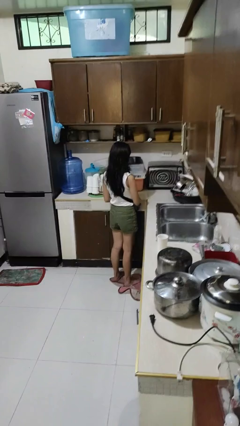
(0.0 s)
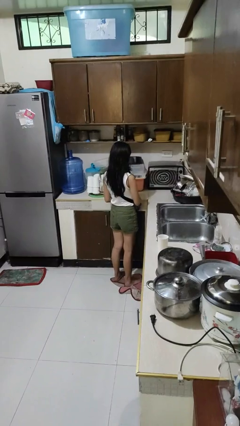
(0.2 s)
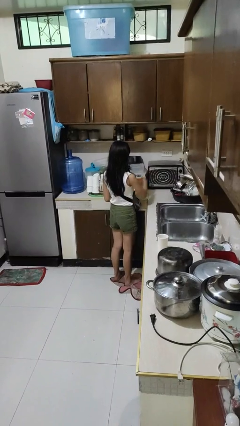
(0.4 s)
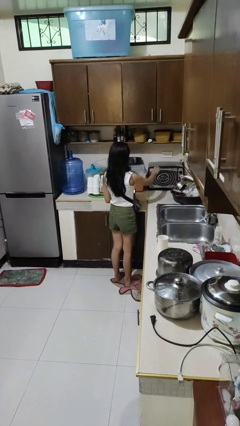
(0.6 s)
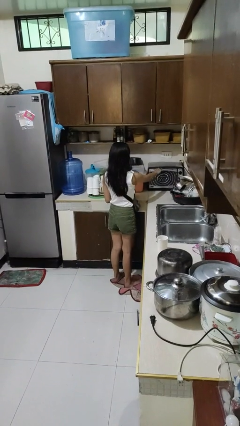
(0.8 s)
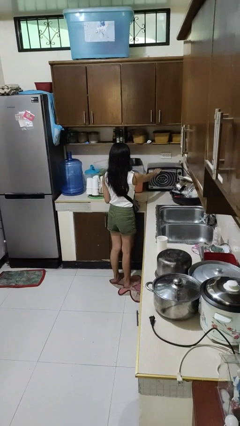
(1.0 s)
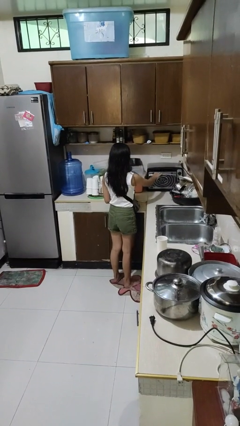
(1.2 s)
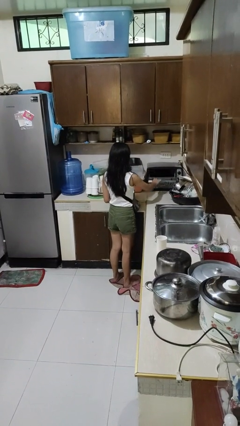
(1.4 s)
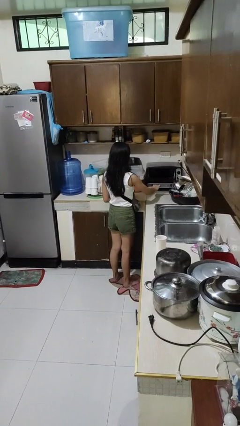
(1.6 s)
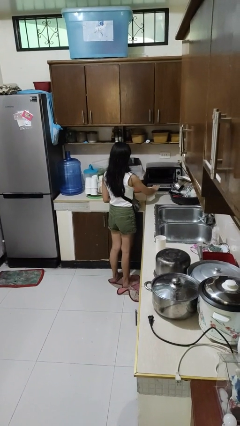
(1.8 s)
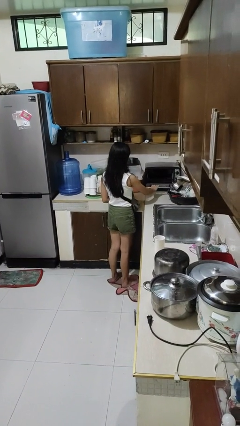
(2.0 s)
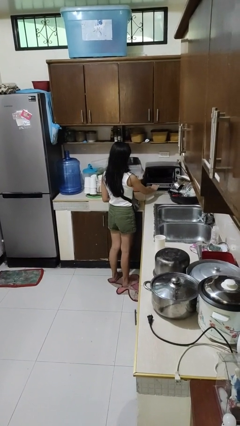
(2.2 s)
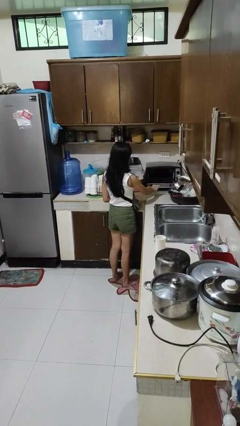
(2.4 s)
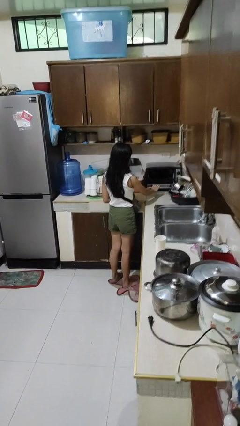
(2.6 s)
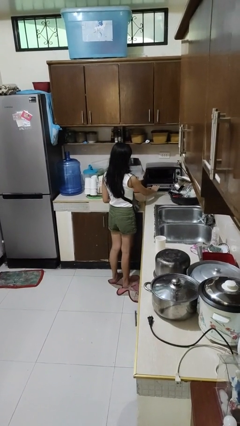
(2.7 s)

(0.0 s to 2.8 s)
person opens microwave

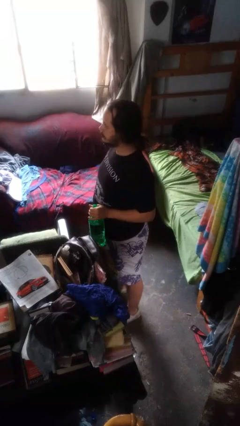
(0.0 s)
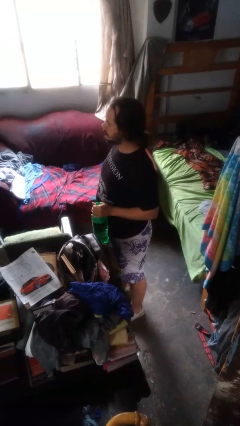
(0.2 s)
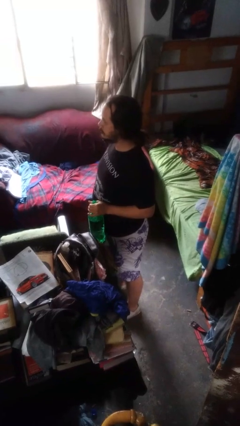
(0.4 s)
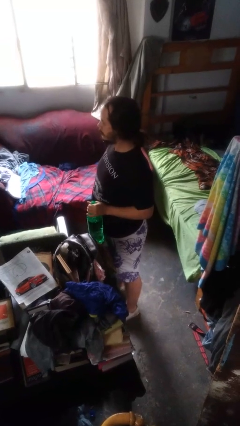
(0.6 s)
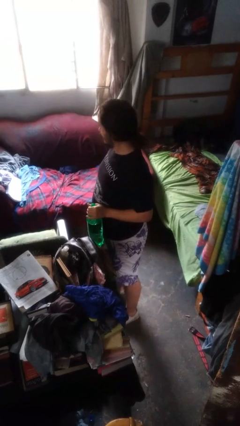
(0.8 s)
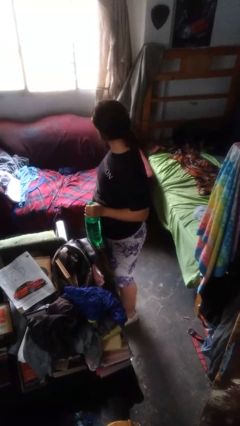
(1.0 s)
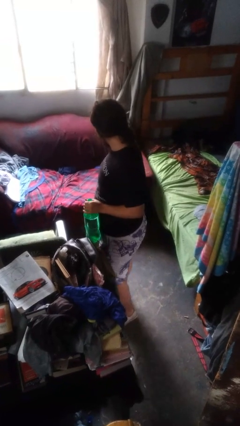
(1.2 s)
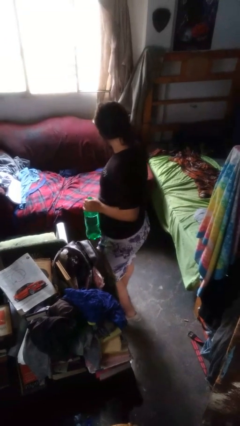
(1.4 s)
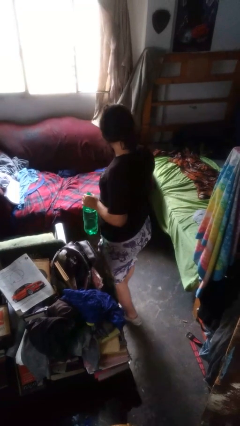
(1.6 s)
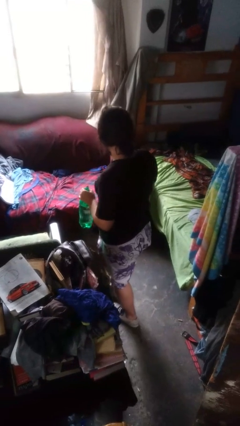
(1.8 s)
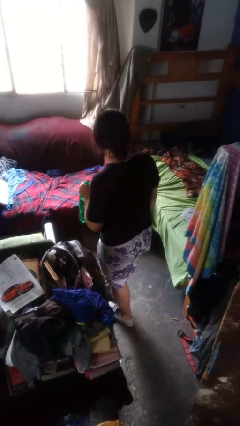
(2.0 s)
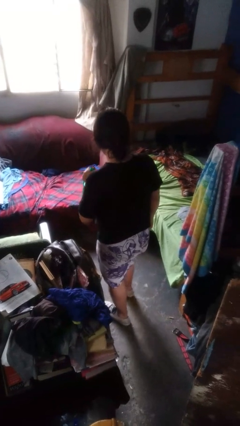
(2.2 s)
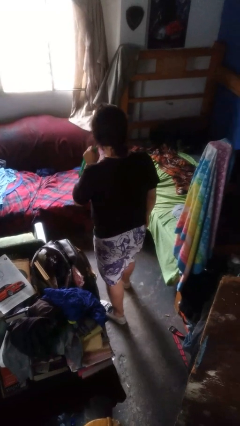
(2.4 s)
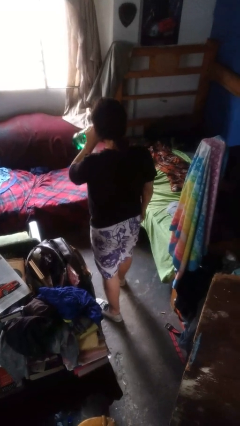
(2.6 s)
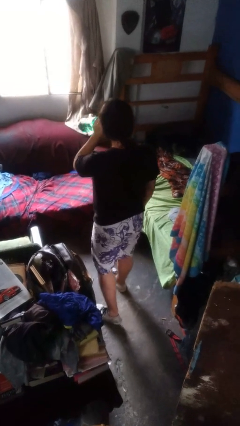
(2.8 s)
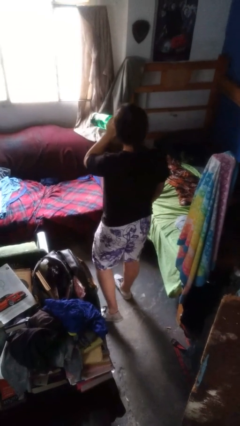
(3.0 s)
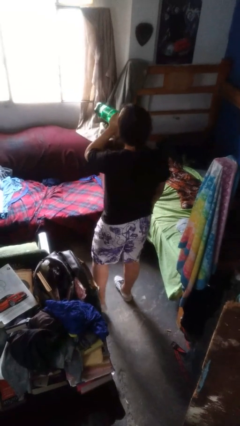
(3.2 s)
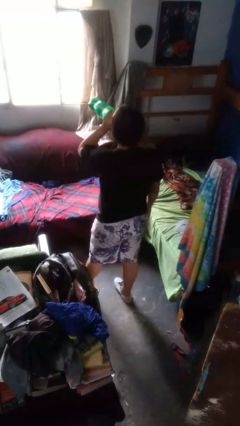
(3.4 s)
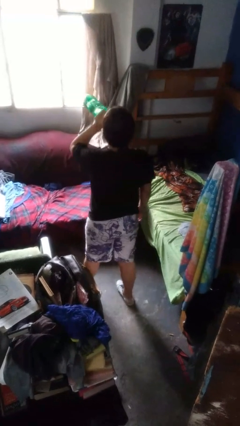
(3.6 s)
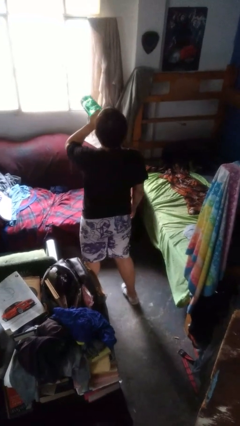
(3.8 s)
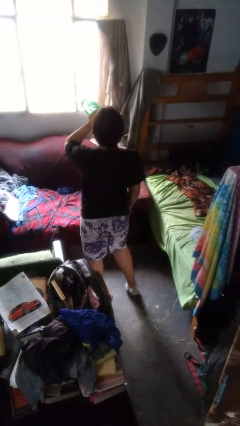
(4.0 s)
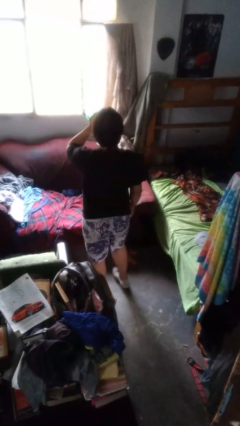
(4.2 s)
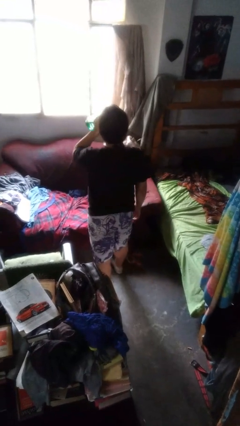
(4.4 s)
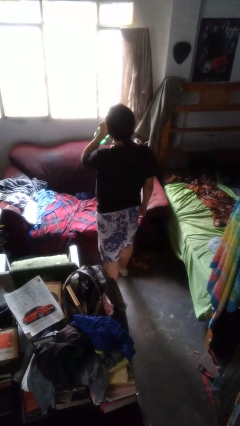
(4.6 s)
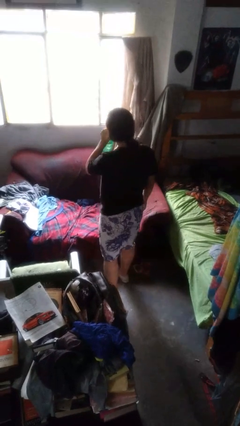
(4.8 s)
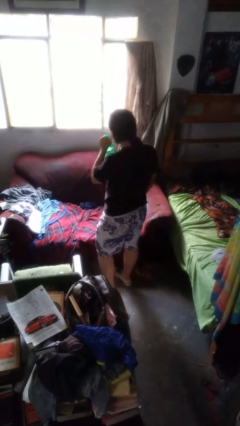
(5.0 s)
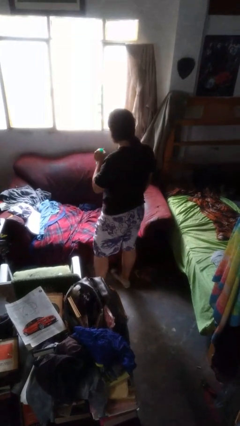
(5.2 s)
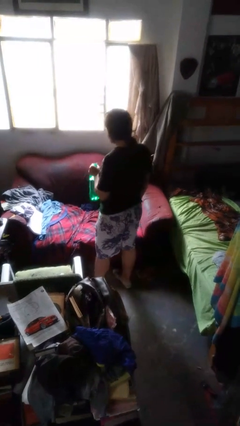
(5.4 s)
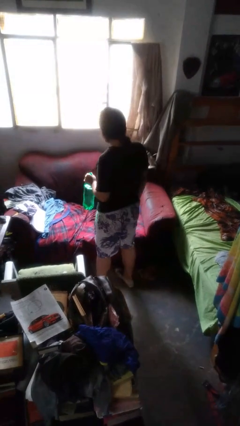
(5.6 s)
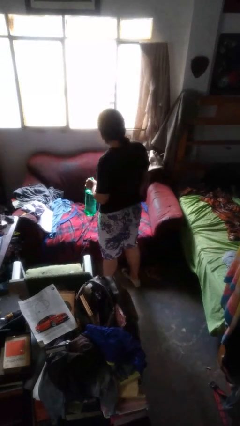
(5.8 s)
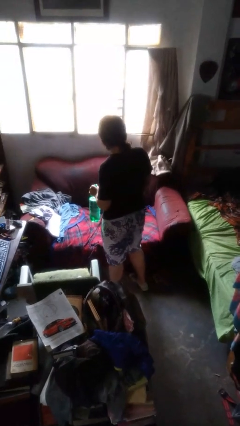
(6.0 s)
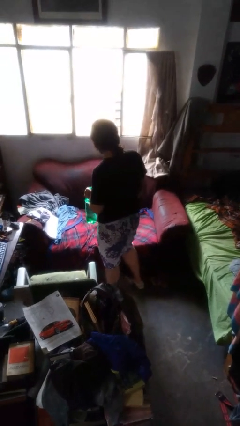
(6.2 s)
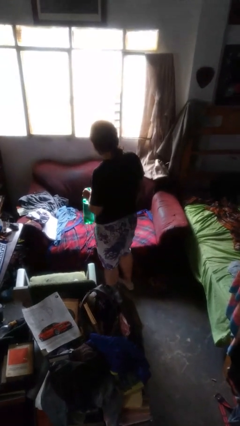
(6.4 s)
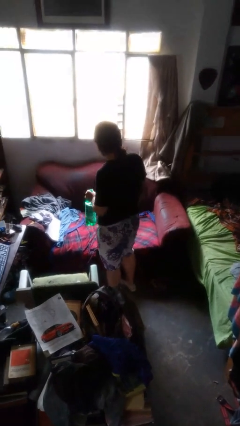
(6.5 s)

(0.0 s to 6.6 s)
person drinks from bottle

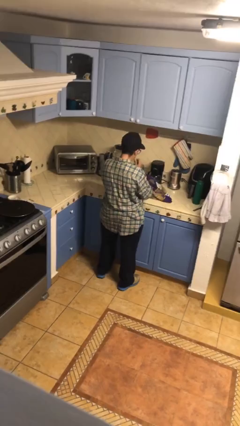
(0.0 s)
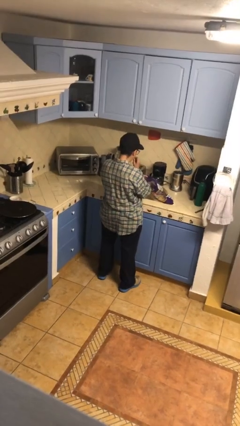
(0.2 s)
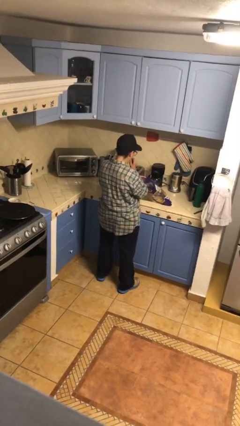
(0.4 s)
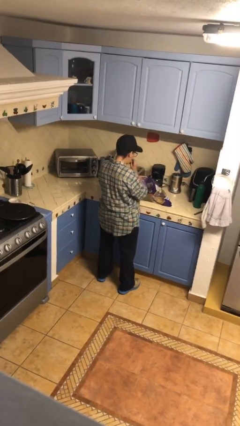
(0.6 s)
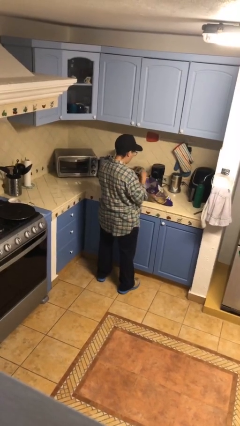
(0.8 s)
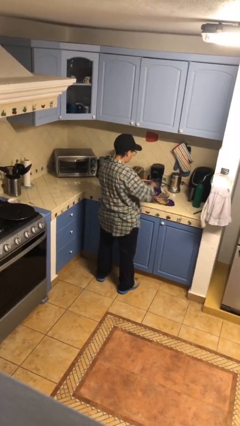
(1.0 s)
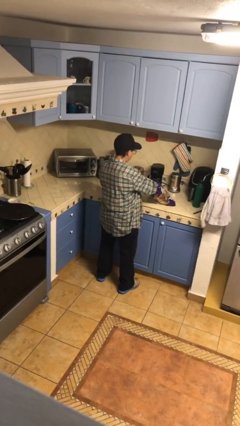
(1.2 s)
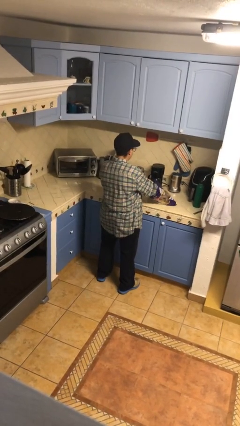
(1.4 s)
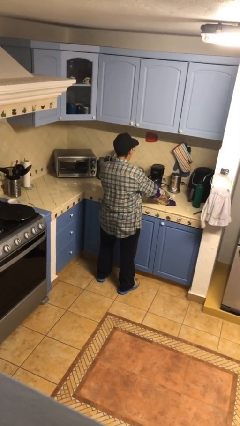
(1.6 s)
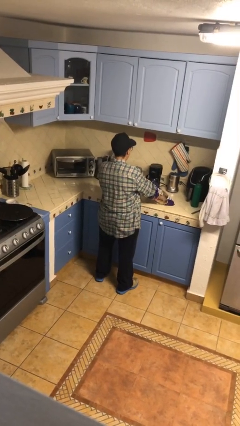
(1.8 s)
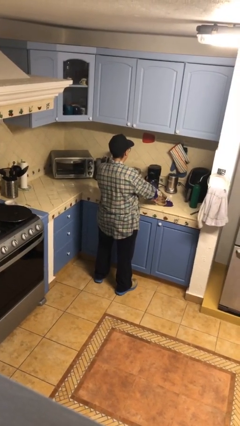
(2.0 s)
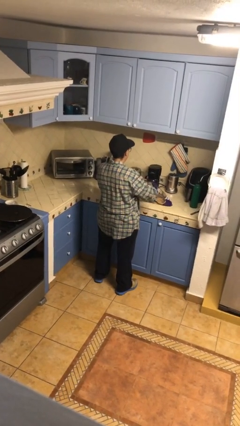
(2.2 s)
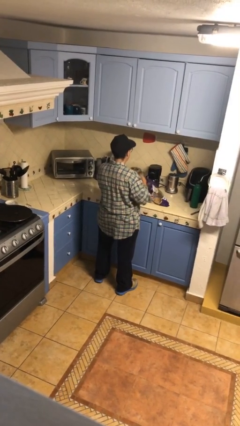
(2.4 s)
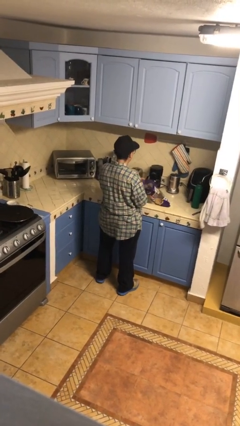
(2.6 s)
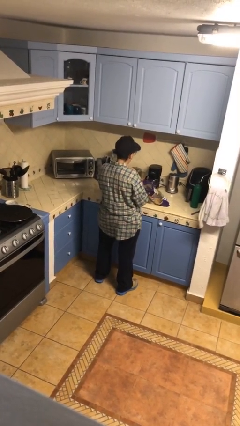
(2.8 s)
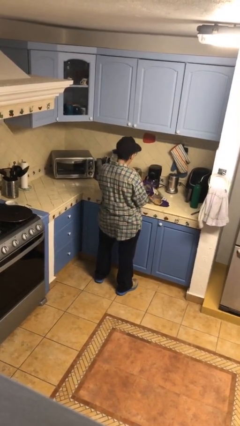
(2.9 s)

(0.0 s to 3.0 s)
person eats snack from bag

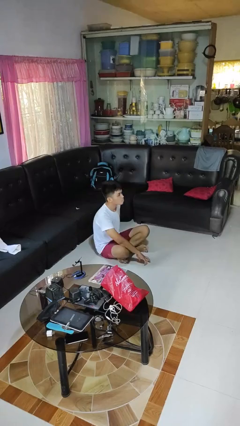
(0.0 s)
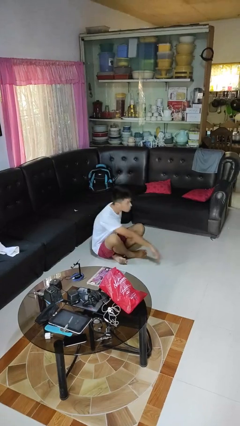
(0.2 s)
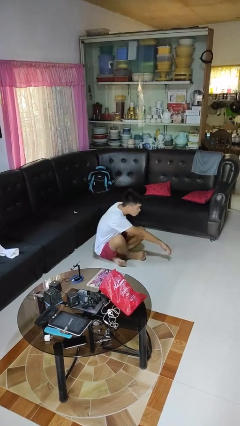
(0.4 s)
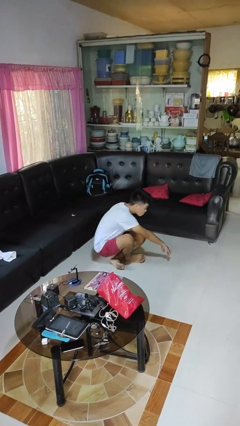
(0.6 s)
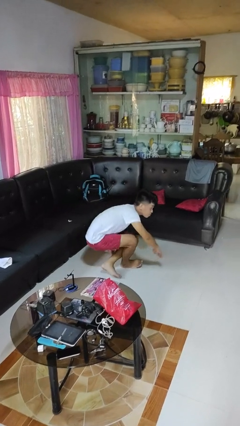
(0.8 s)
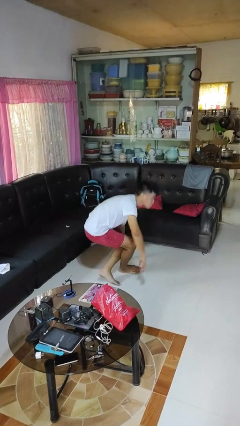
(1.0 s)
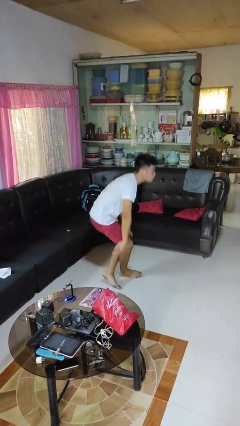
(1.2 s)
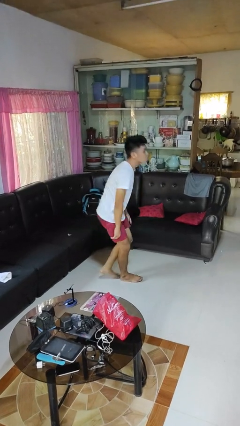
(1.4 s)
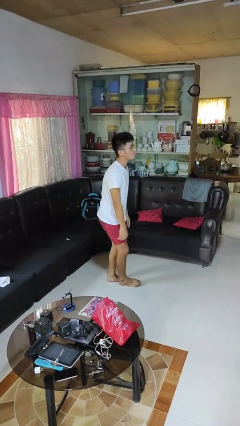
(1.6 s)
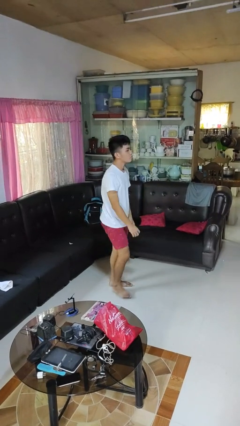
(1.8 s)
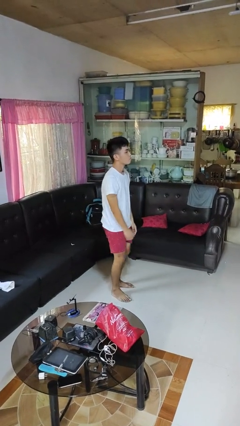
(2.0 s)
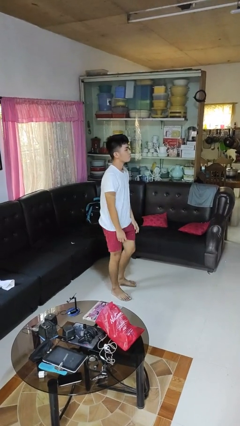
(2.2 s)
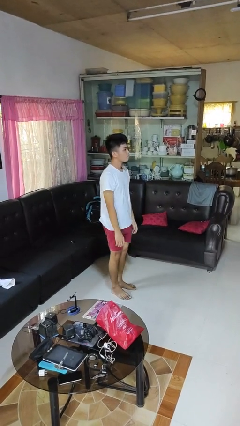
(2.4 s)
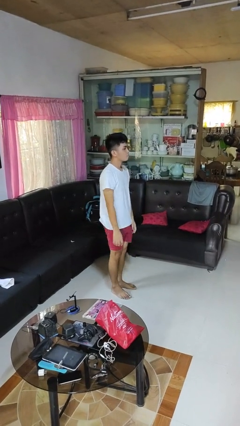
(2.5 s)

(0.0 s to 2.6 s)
person stands up from floor

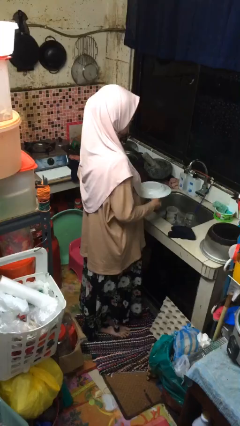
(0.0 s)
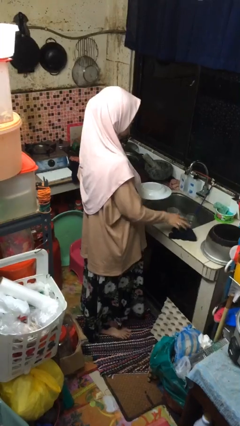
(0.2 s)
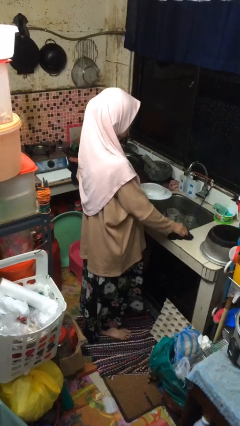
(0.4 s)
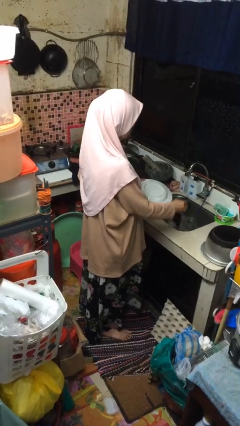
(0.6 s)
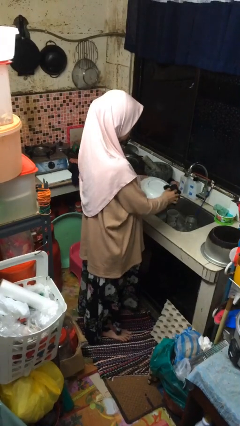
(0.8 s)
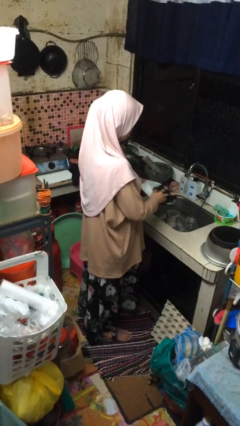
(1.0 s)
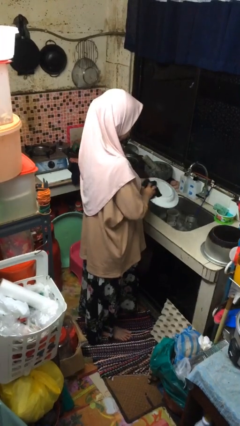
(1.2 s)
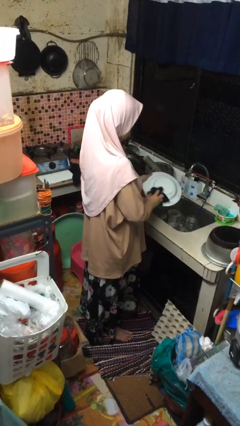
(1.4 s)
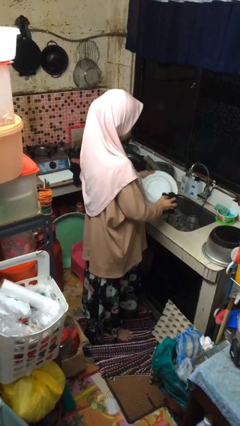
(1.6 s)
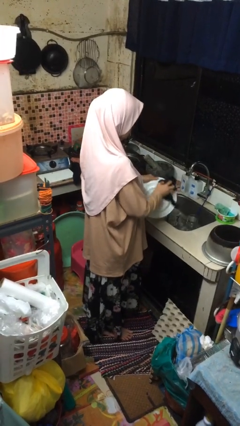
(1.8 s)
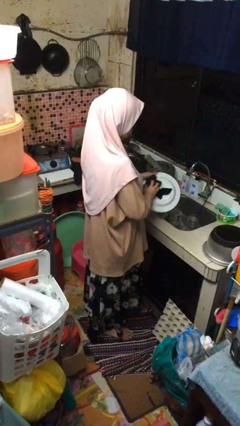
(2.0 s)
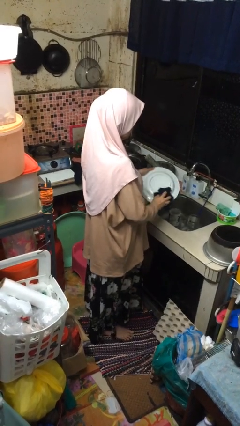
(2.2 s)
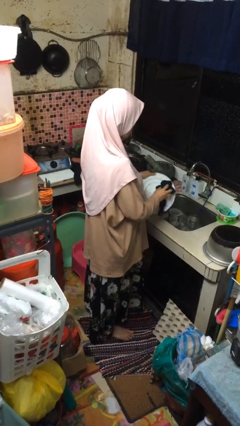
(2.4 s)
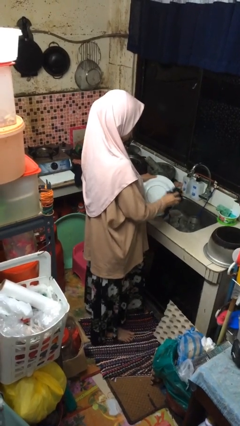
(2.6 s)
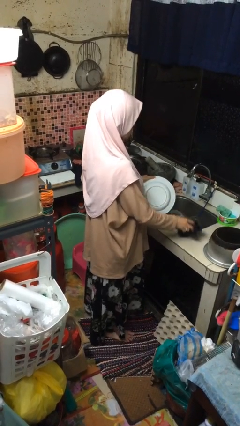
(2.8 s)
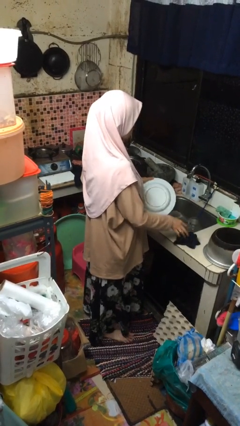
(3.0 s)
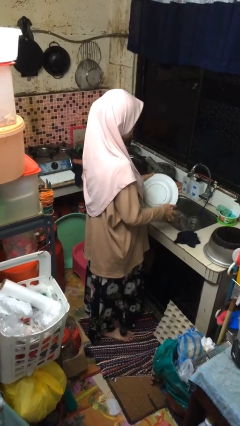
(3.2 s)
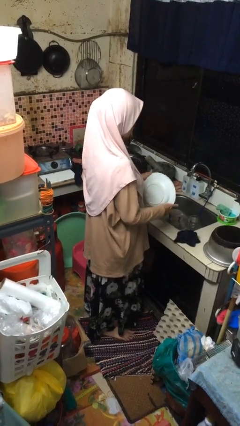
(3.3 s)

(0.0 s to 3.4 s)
person dries dish
